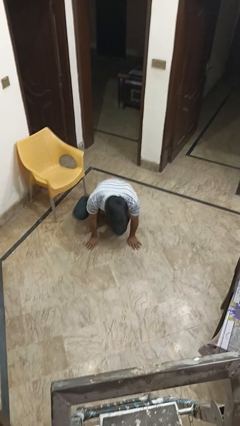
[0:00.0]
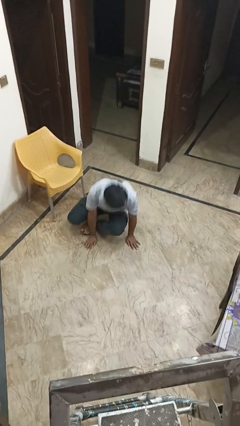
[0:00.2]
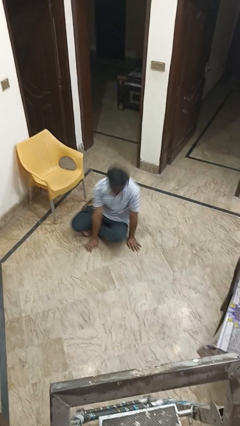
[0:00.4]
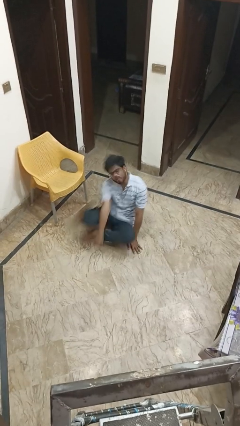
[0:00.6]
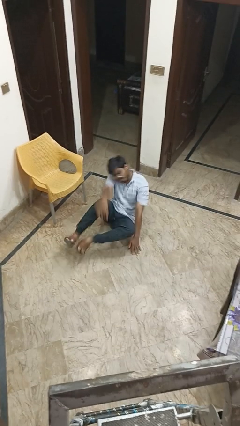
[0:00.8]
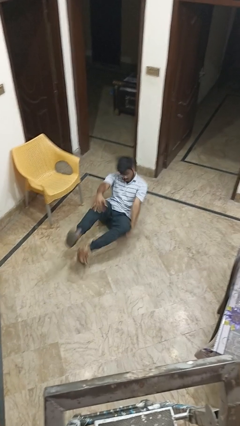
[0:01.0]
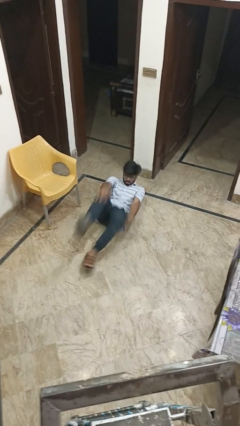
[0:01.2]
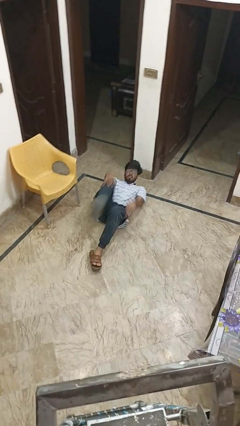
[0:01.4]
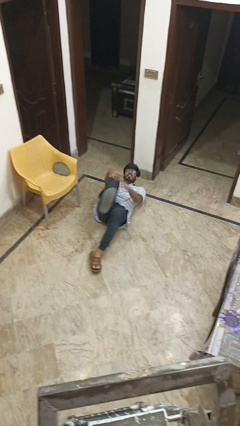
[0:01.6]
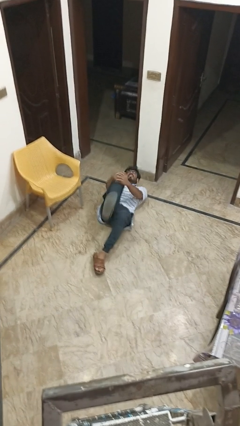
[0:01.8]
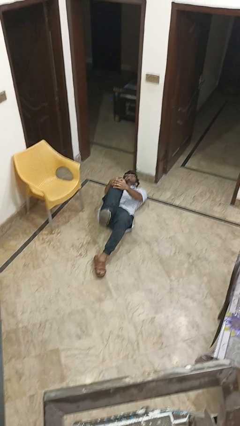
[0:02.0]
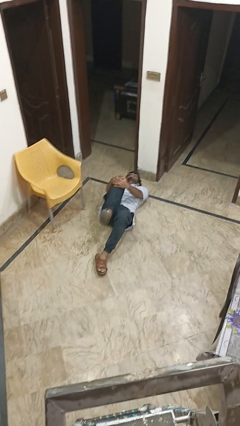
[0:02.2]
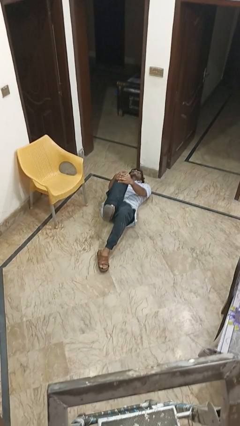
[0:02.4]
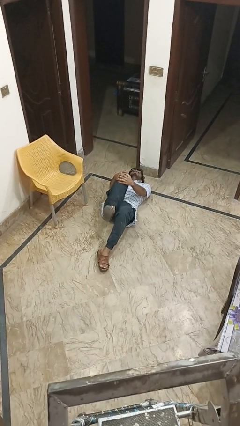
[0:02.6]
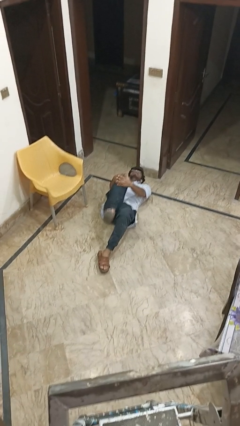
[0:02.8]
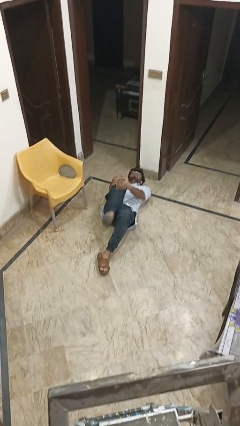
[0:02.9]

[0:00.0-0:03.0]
person lies down on floor

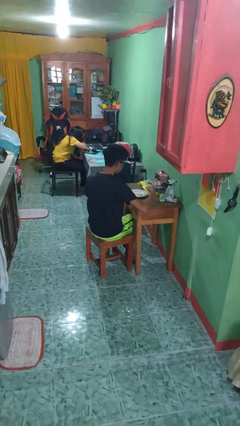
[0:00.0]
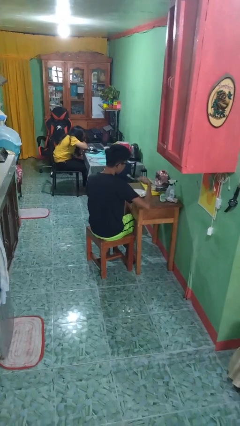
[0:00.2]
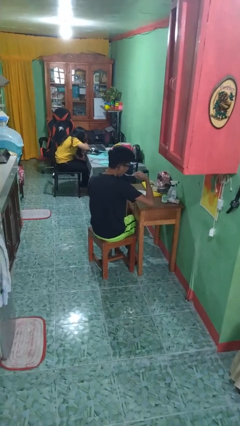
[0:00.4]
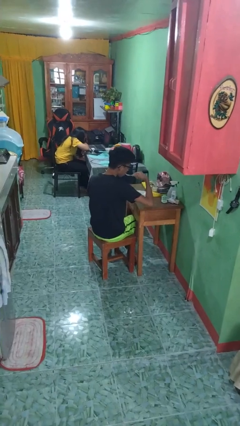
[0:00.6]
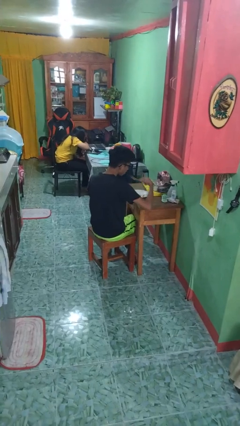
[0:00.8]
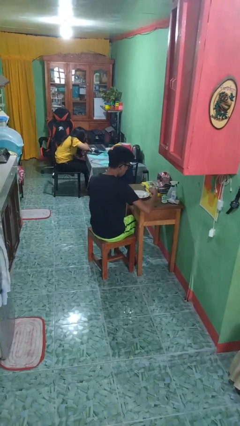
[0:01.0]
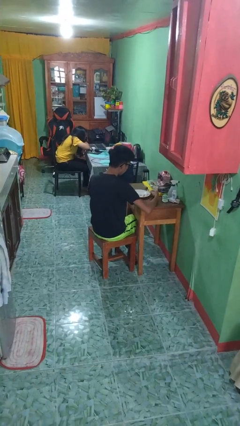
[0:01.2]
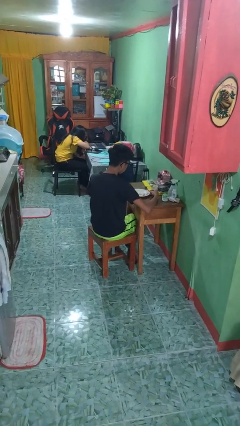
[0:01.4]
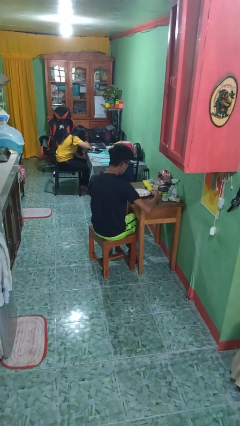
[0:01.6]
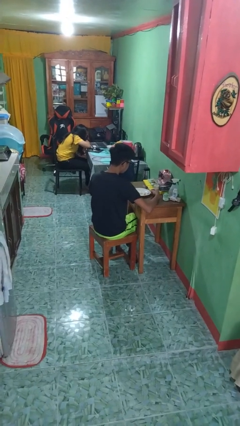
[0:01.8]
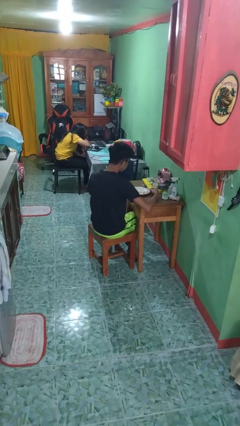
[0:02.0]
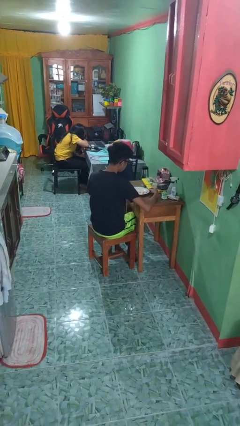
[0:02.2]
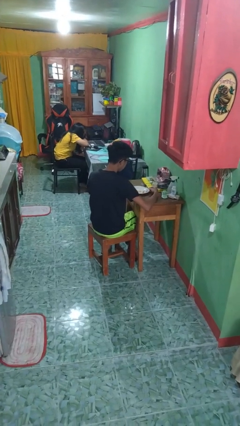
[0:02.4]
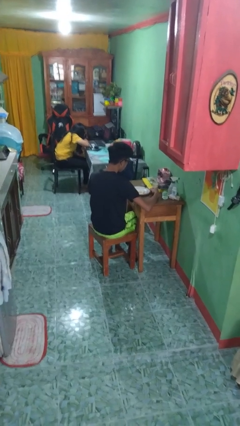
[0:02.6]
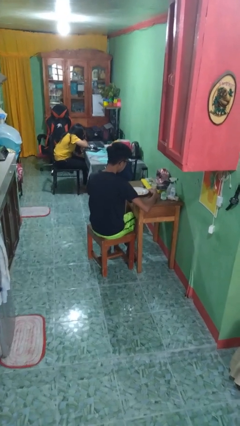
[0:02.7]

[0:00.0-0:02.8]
person eats with utensil

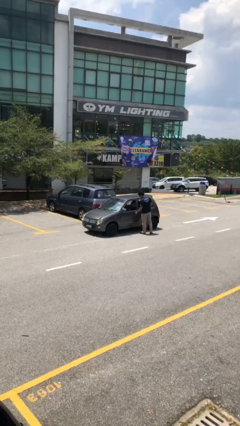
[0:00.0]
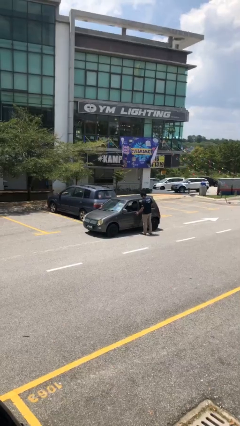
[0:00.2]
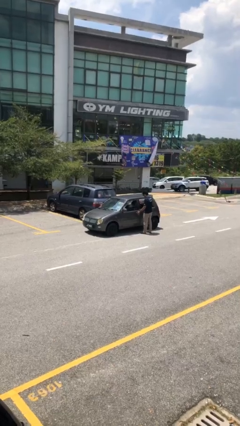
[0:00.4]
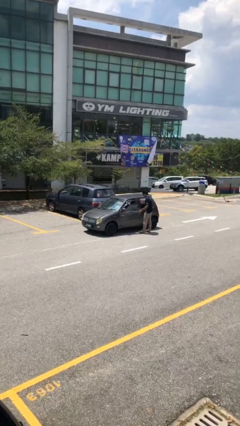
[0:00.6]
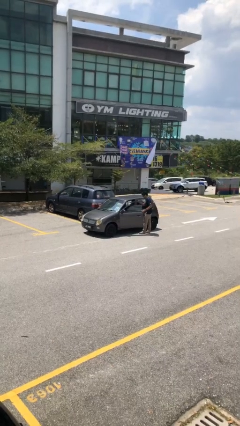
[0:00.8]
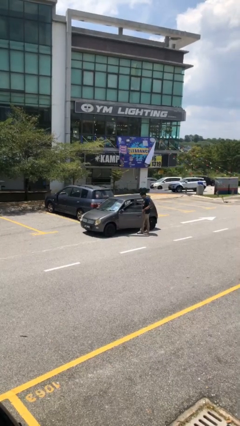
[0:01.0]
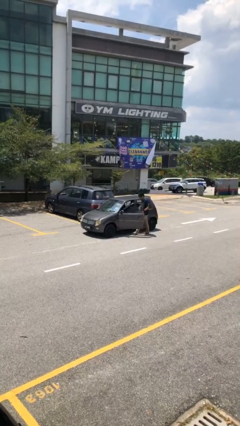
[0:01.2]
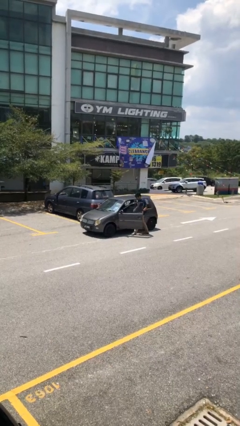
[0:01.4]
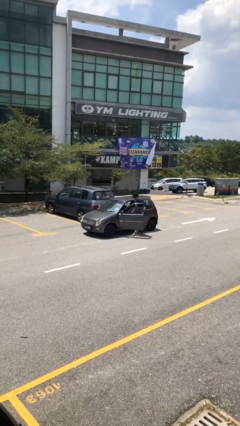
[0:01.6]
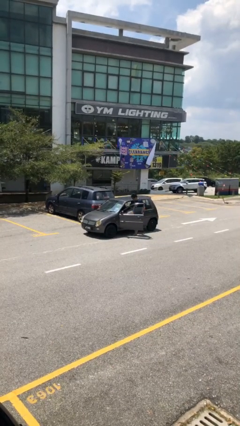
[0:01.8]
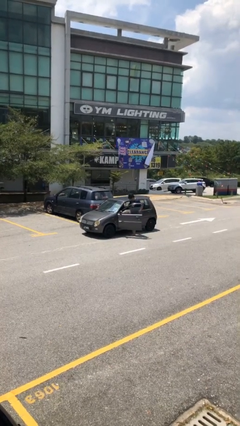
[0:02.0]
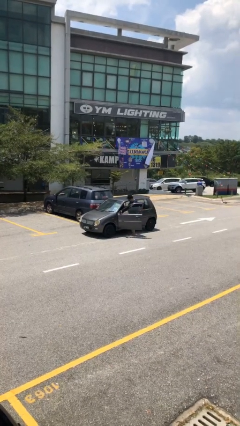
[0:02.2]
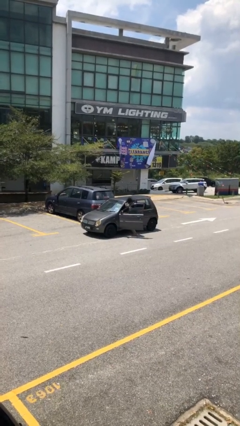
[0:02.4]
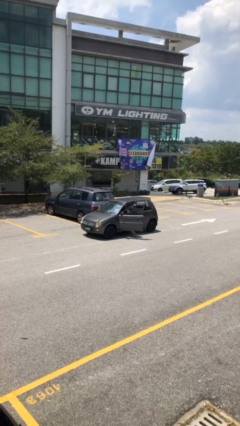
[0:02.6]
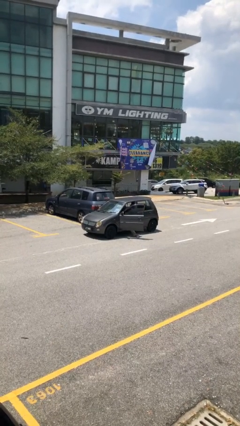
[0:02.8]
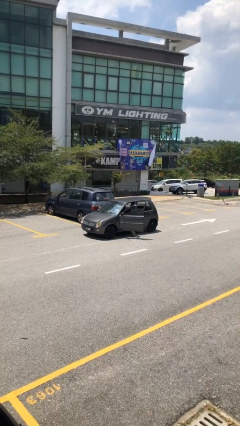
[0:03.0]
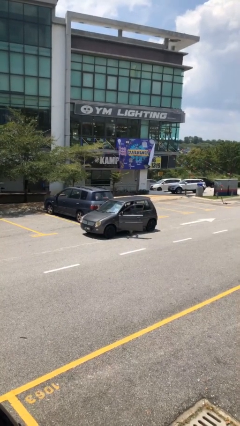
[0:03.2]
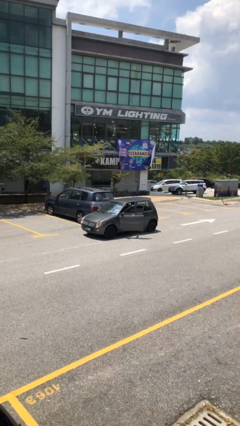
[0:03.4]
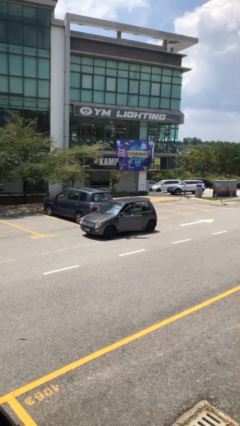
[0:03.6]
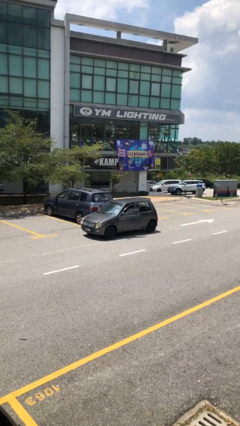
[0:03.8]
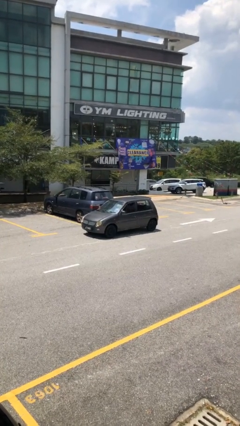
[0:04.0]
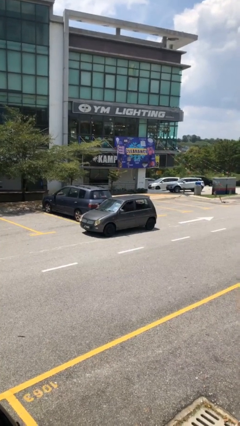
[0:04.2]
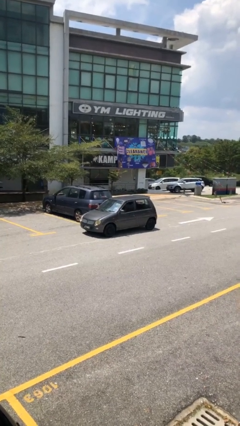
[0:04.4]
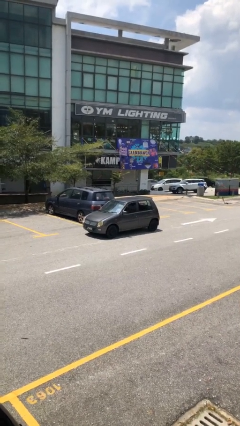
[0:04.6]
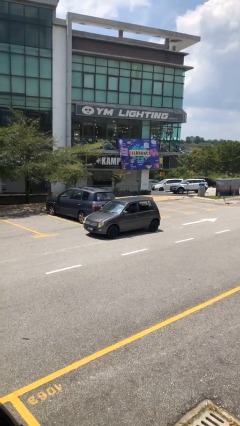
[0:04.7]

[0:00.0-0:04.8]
car picks up person

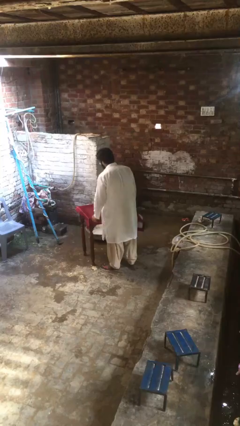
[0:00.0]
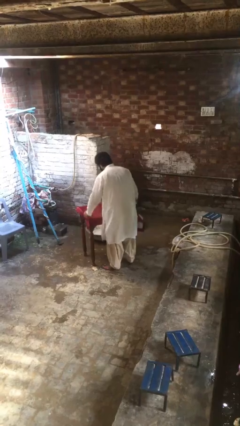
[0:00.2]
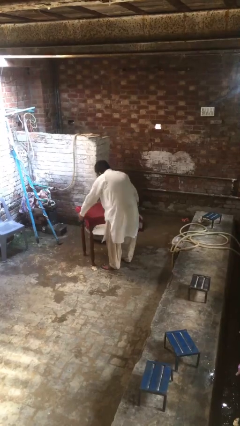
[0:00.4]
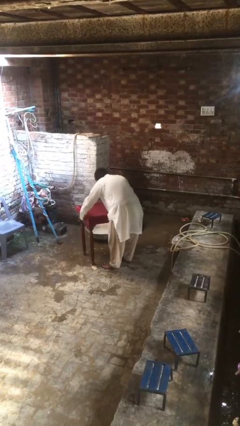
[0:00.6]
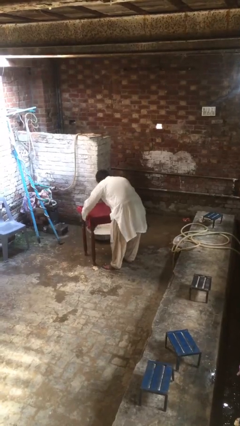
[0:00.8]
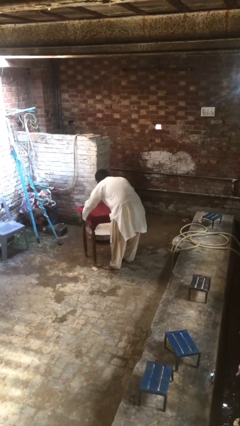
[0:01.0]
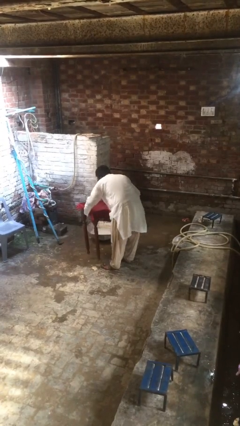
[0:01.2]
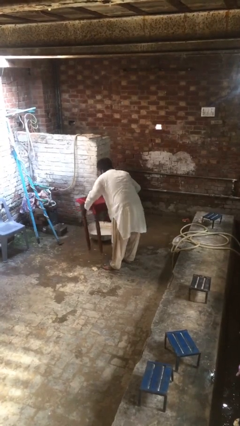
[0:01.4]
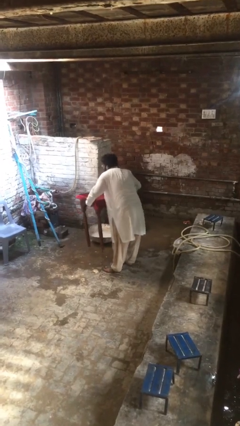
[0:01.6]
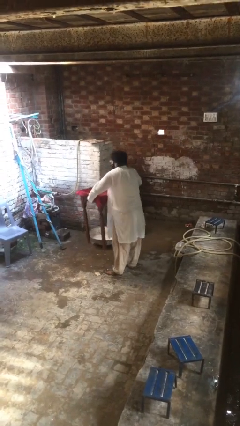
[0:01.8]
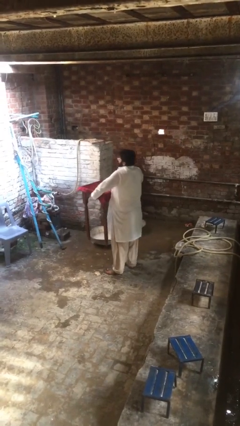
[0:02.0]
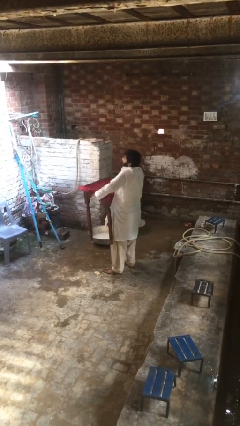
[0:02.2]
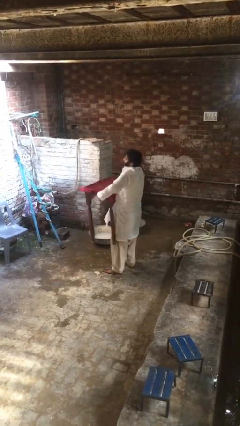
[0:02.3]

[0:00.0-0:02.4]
person picks up object from floor

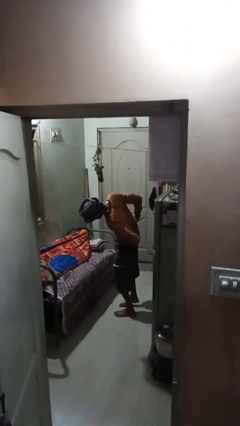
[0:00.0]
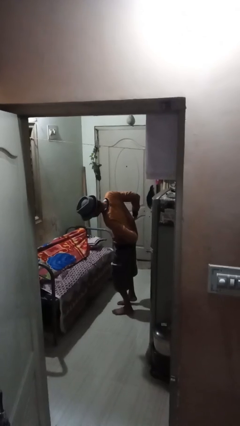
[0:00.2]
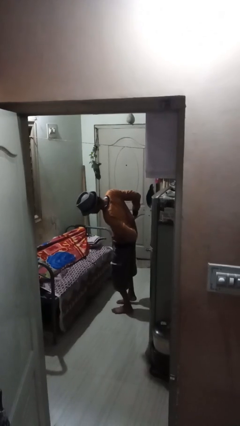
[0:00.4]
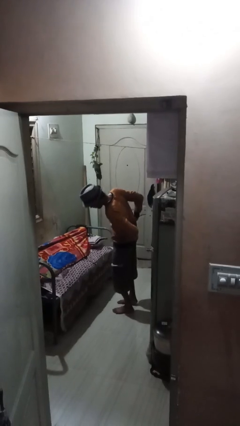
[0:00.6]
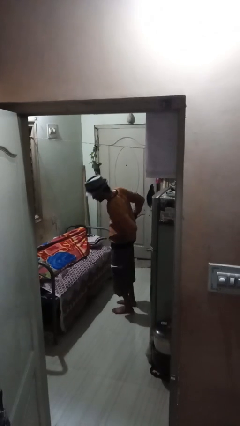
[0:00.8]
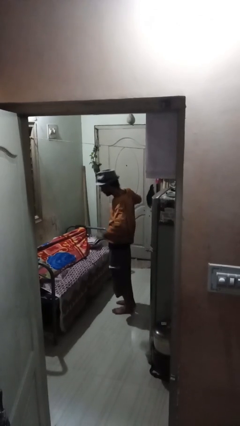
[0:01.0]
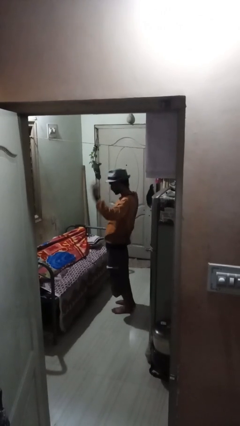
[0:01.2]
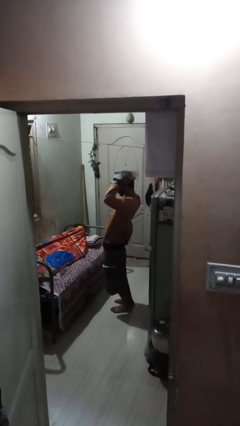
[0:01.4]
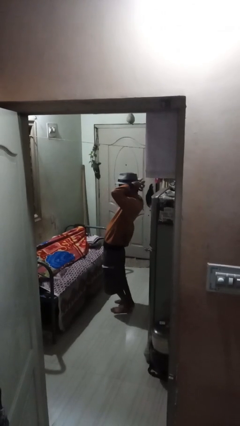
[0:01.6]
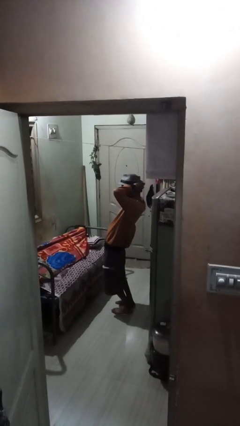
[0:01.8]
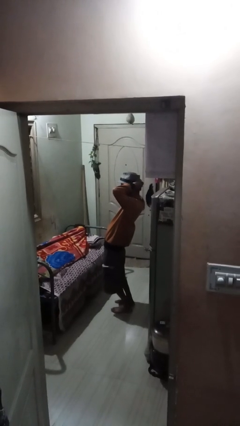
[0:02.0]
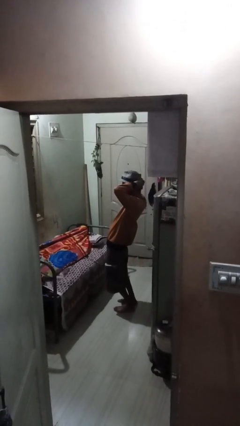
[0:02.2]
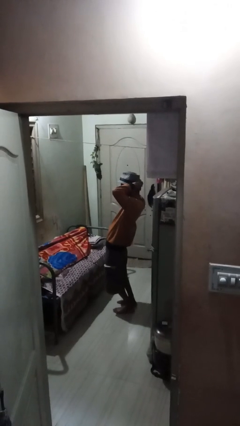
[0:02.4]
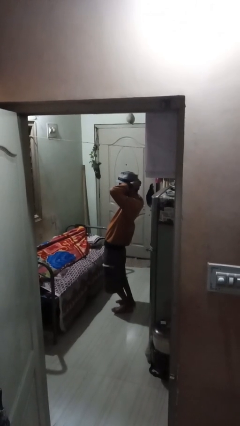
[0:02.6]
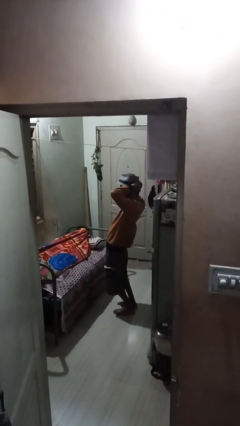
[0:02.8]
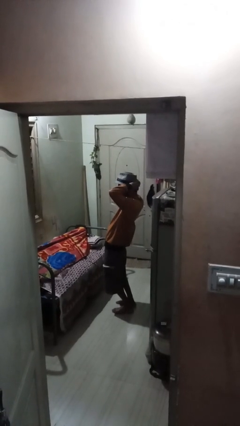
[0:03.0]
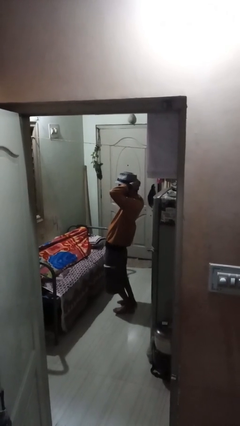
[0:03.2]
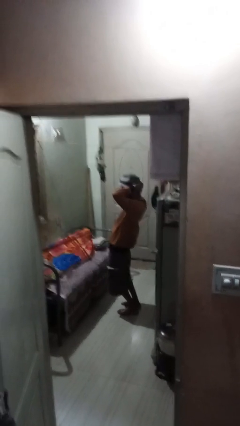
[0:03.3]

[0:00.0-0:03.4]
person stretches arms over head

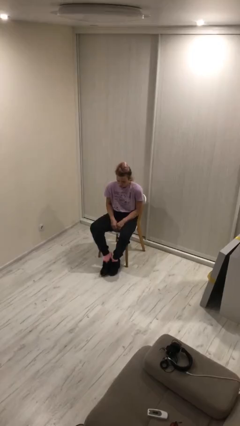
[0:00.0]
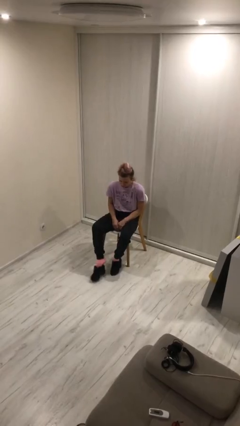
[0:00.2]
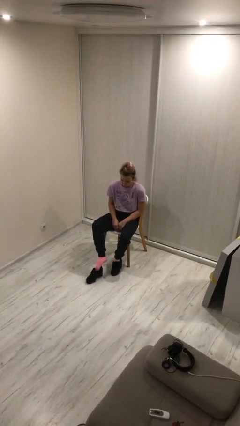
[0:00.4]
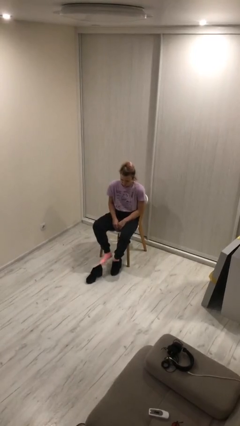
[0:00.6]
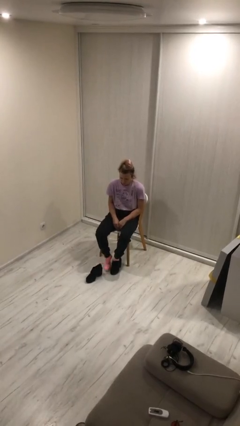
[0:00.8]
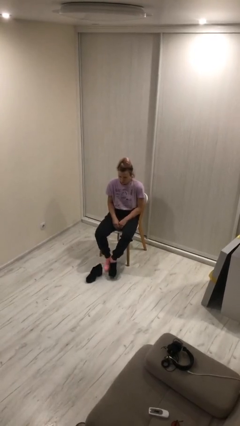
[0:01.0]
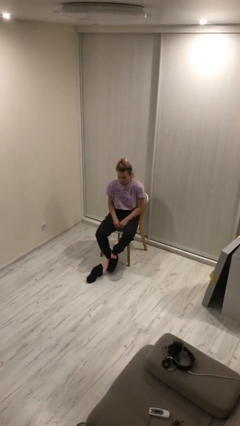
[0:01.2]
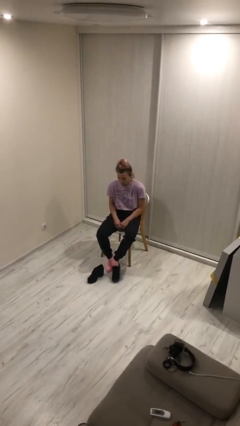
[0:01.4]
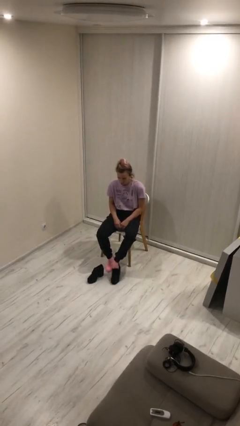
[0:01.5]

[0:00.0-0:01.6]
person takes off shoes
